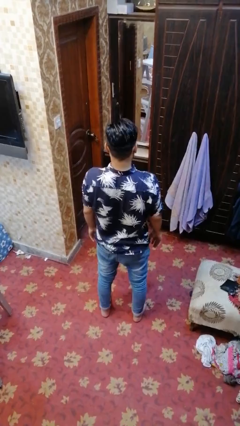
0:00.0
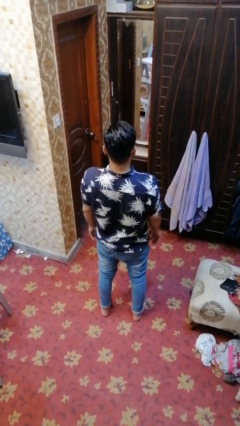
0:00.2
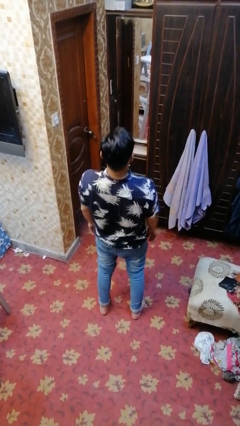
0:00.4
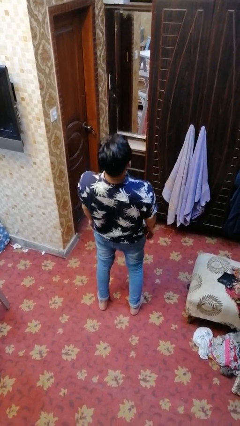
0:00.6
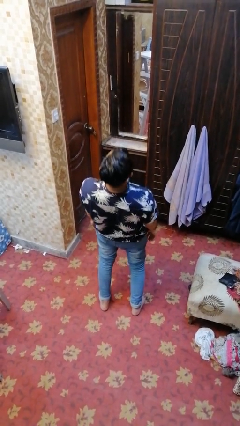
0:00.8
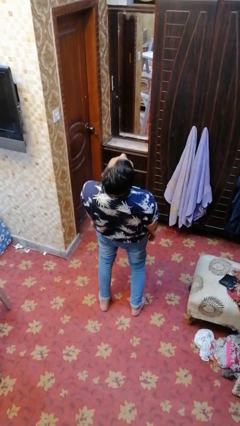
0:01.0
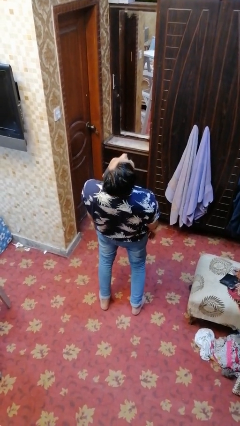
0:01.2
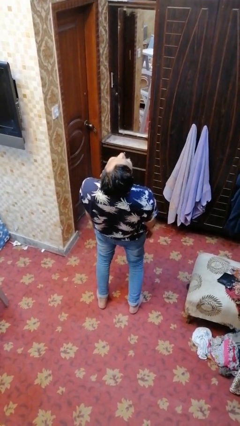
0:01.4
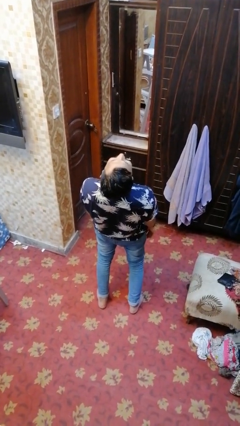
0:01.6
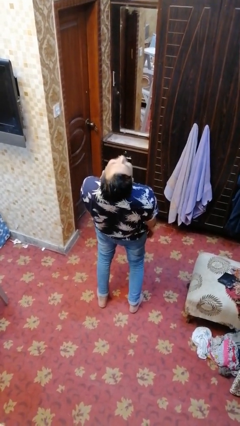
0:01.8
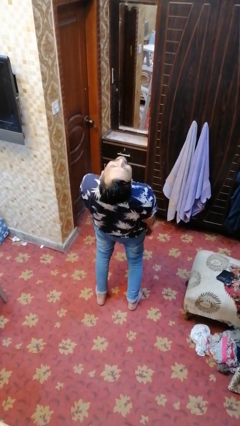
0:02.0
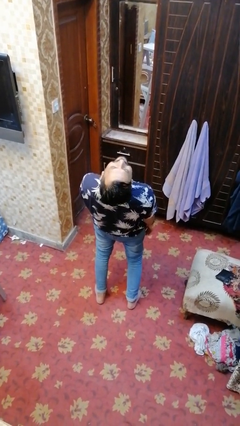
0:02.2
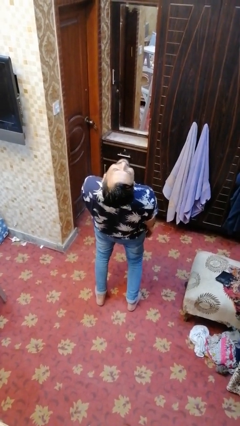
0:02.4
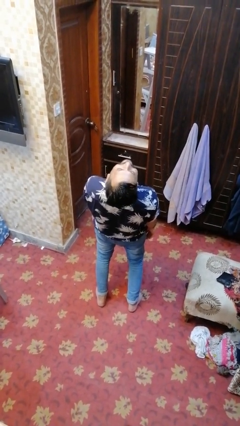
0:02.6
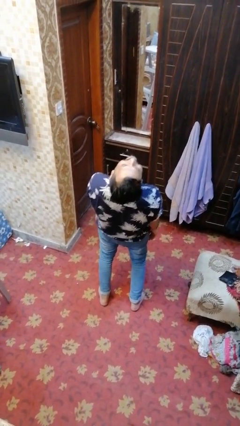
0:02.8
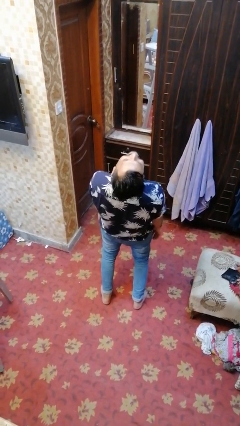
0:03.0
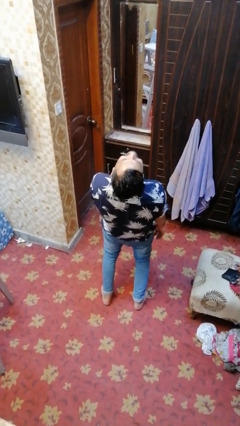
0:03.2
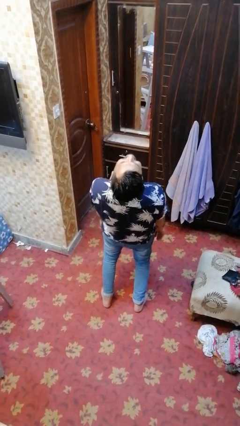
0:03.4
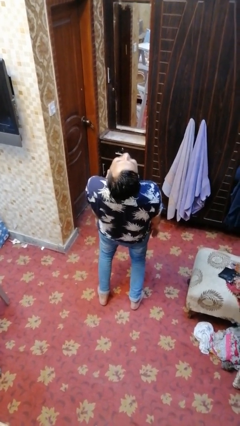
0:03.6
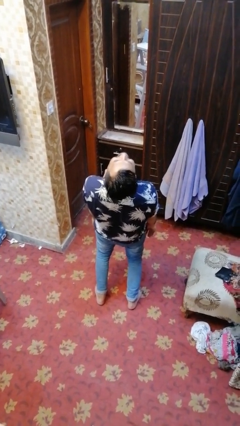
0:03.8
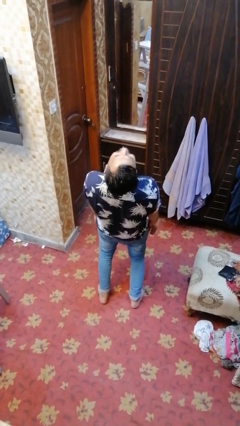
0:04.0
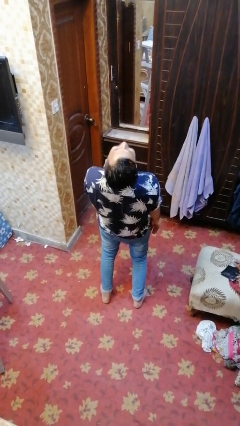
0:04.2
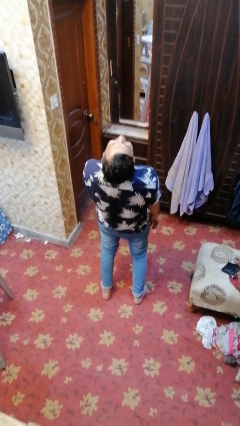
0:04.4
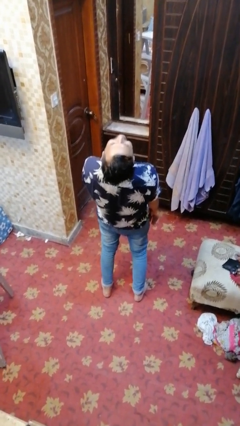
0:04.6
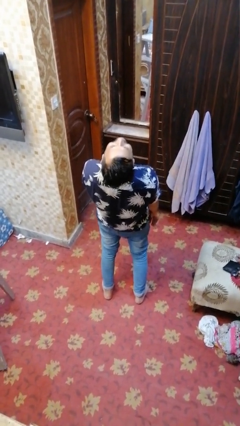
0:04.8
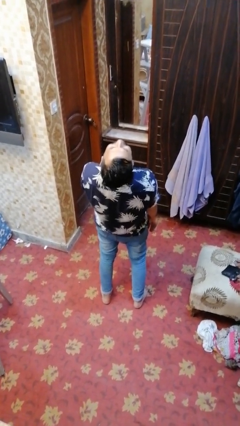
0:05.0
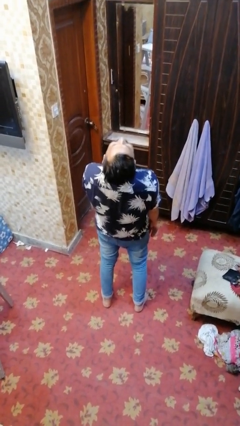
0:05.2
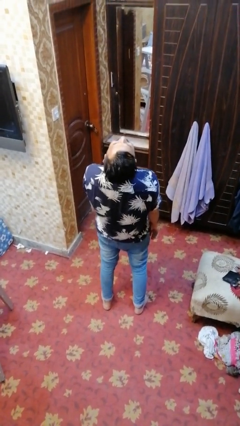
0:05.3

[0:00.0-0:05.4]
person stretches back

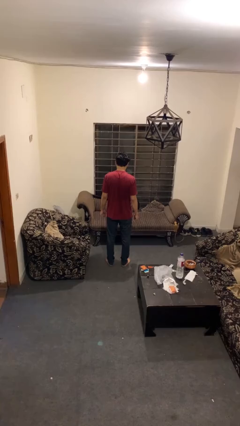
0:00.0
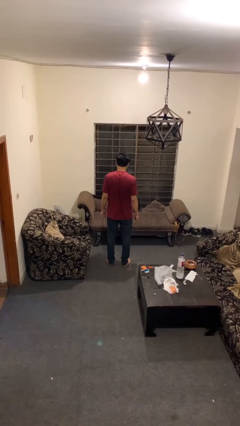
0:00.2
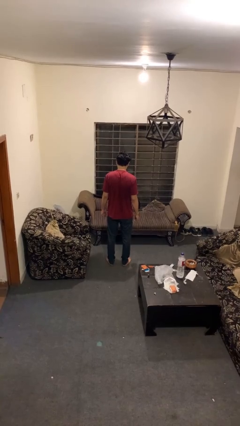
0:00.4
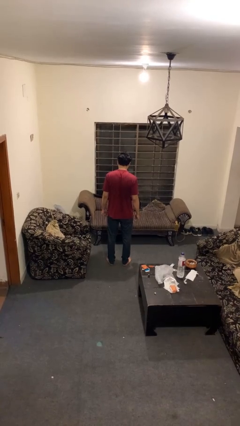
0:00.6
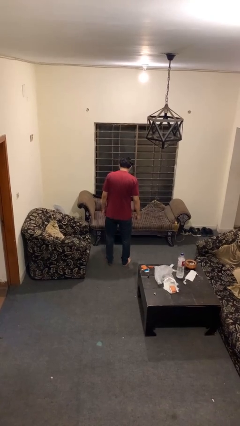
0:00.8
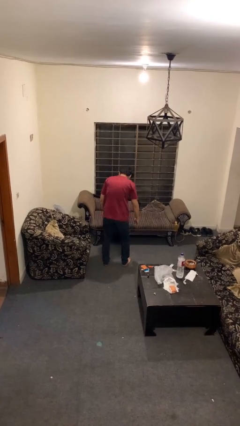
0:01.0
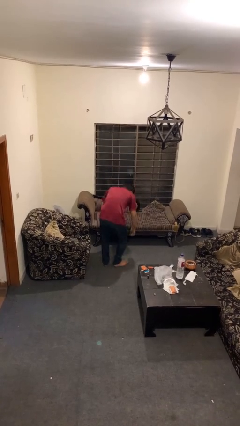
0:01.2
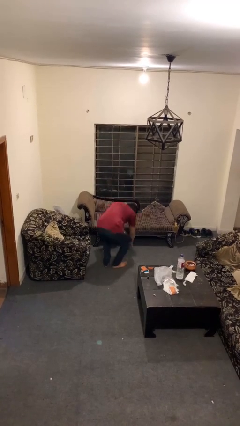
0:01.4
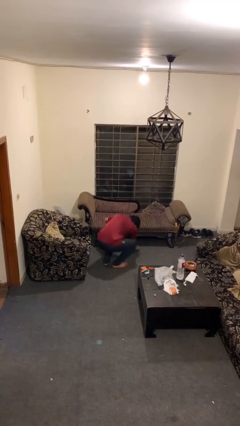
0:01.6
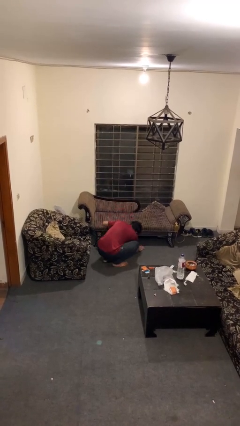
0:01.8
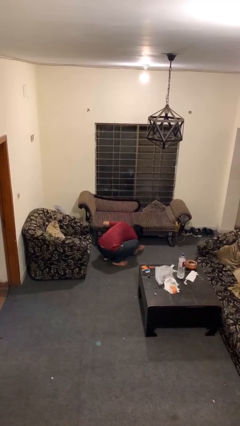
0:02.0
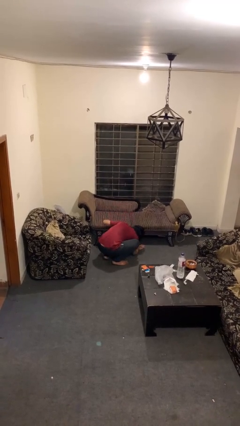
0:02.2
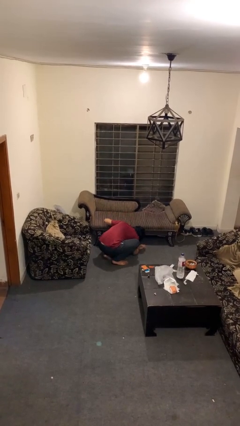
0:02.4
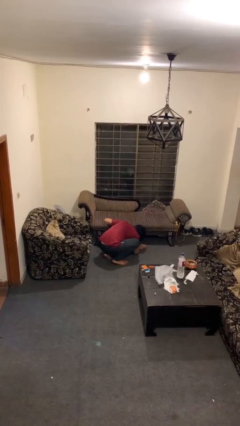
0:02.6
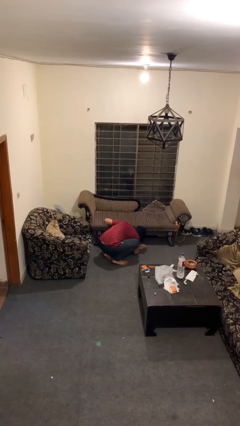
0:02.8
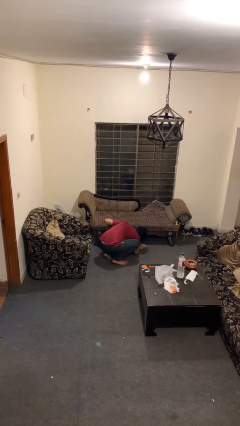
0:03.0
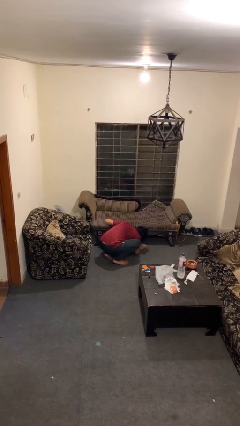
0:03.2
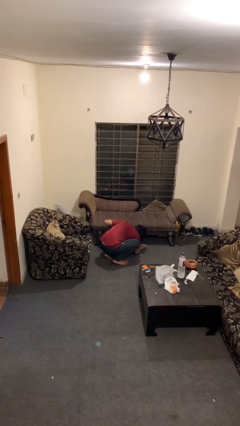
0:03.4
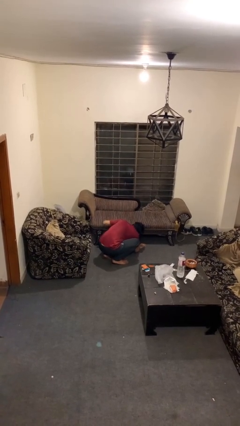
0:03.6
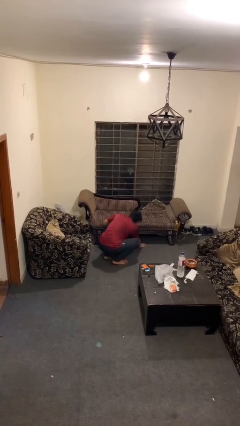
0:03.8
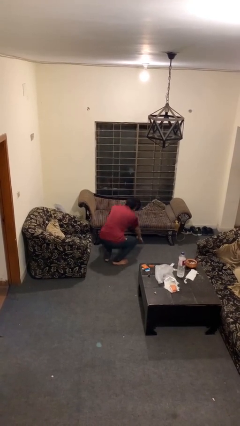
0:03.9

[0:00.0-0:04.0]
person searches under couch

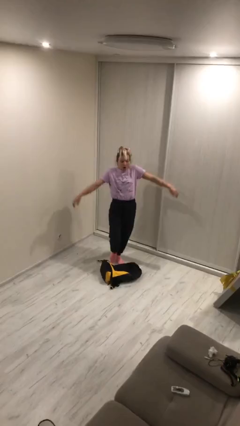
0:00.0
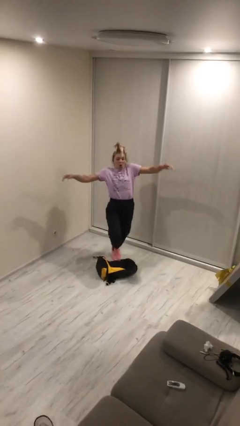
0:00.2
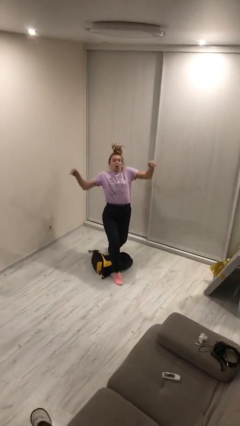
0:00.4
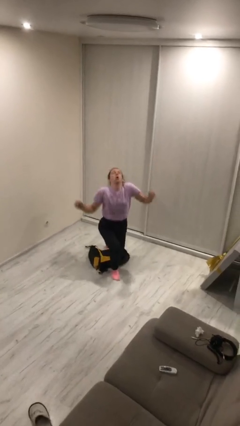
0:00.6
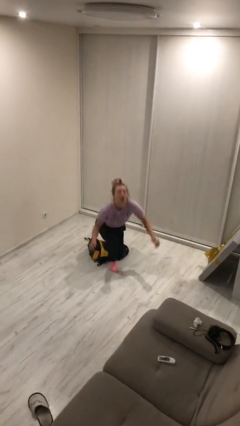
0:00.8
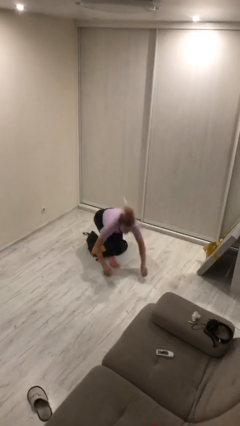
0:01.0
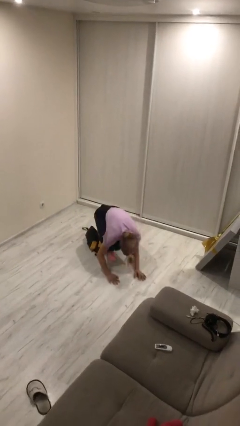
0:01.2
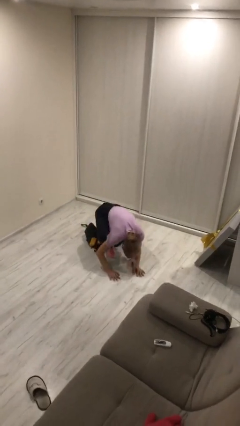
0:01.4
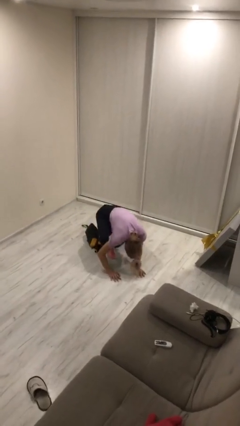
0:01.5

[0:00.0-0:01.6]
person trips on object on floor

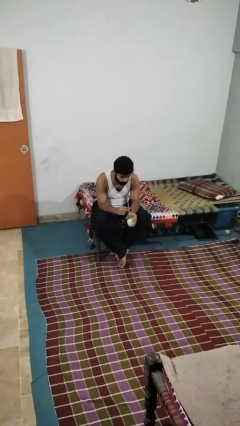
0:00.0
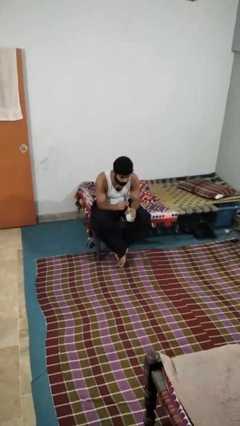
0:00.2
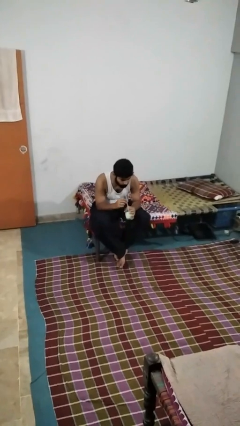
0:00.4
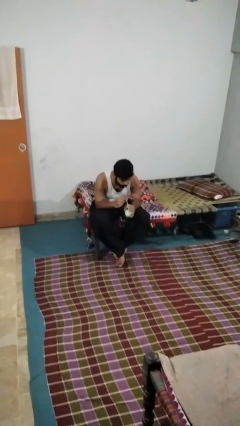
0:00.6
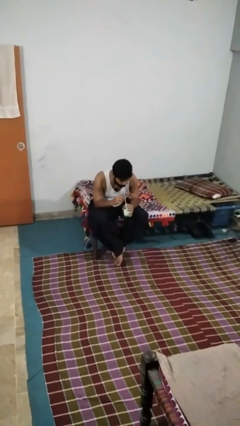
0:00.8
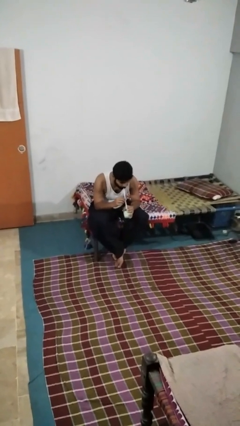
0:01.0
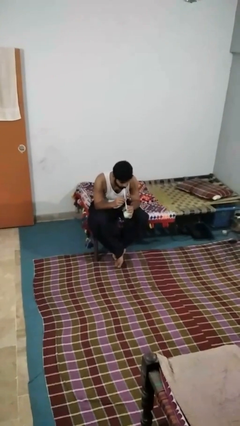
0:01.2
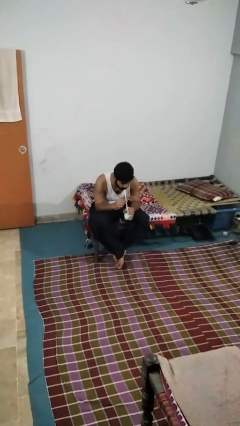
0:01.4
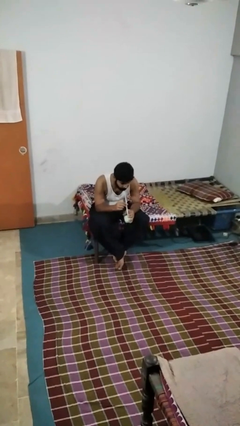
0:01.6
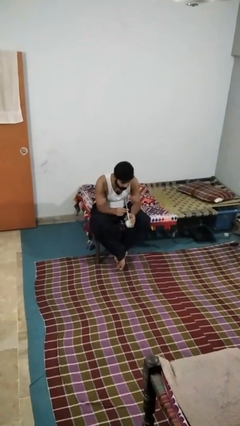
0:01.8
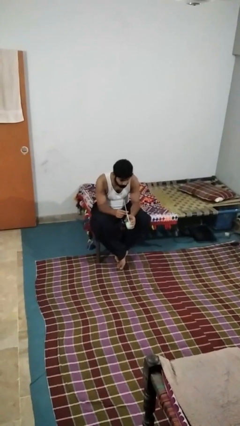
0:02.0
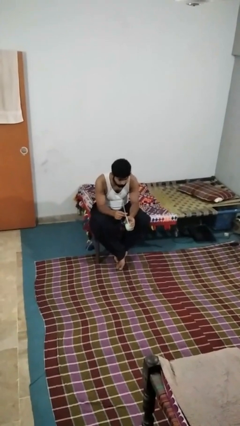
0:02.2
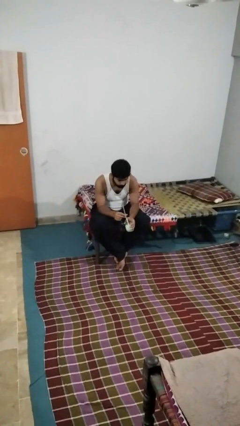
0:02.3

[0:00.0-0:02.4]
person drinks from straw

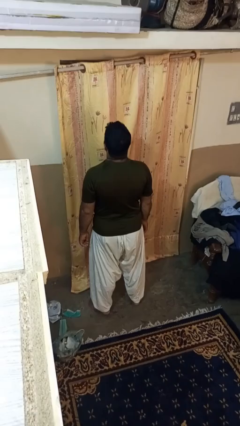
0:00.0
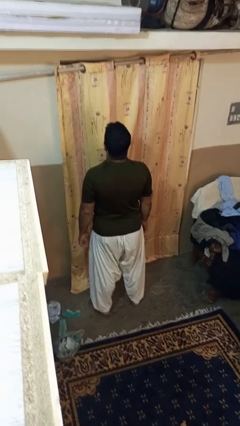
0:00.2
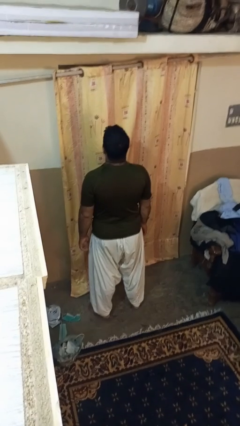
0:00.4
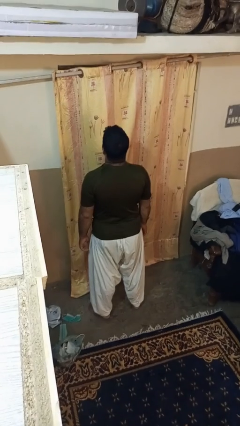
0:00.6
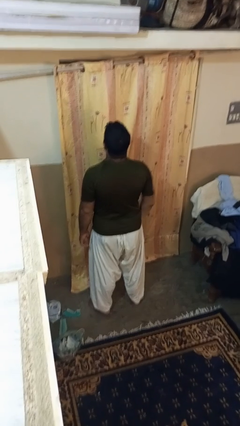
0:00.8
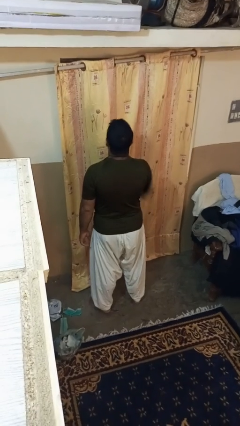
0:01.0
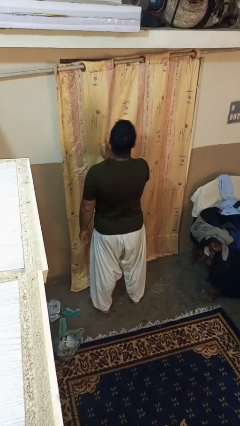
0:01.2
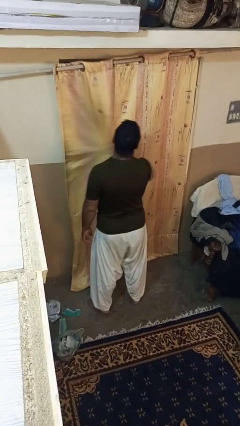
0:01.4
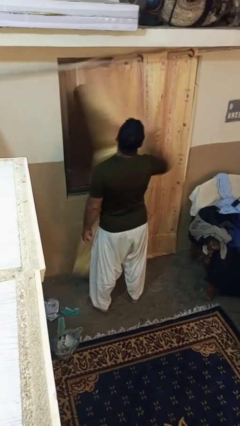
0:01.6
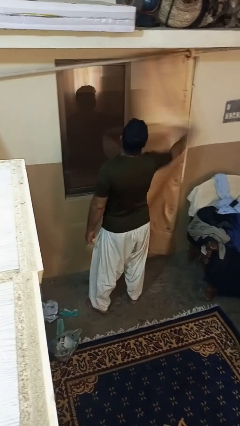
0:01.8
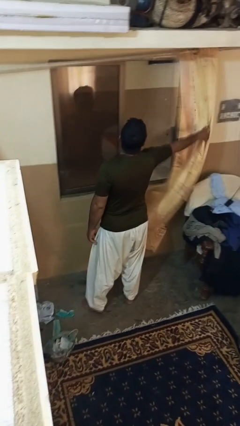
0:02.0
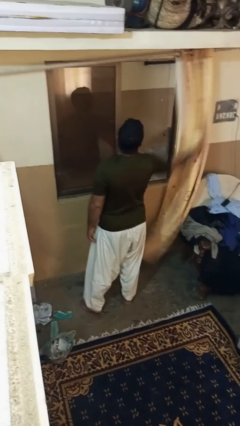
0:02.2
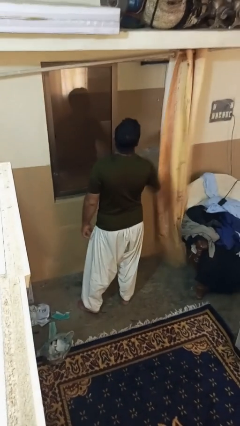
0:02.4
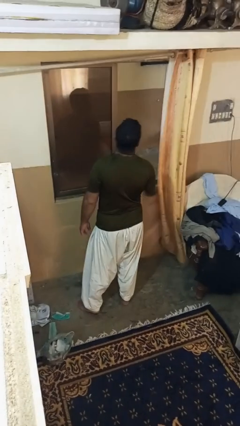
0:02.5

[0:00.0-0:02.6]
person opens curtains

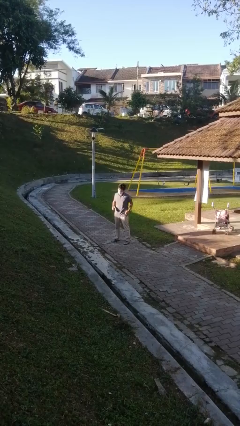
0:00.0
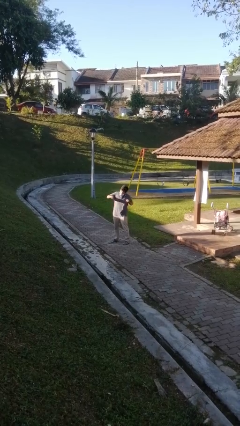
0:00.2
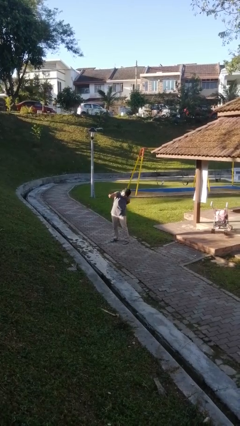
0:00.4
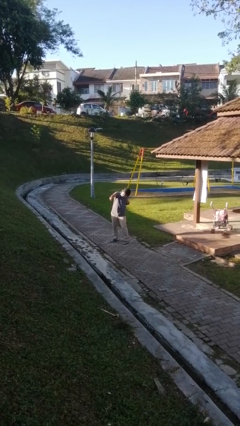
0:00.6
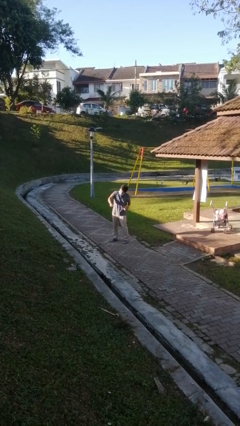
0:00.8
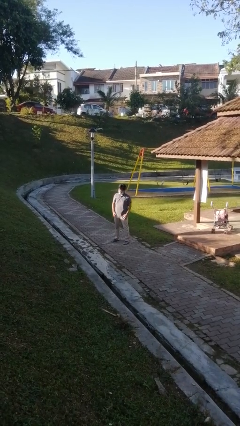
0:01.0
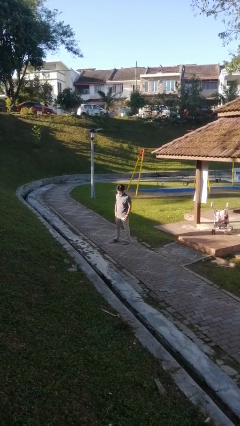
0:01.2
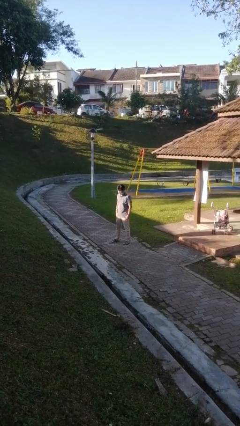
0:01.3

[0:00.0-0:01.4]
person punches
